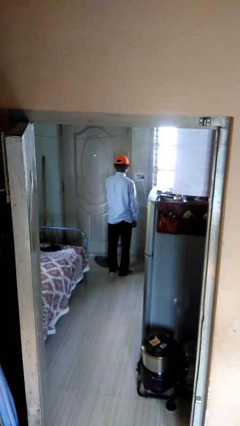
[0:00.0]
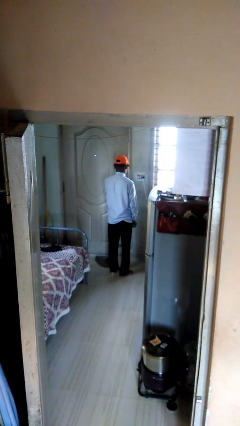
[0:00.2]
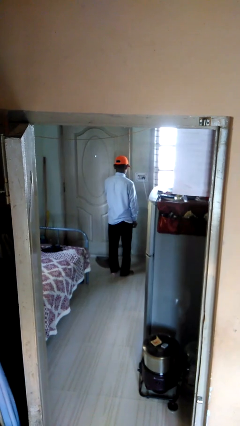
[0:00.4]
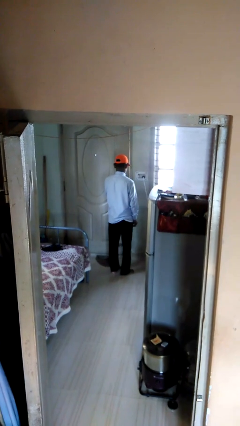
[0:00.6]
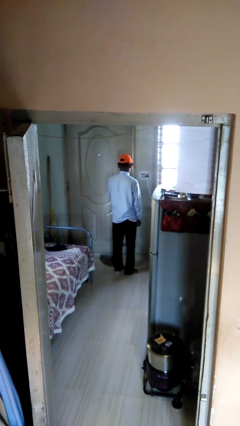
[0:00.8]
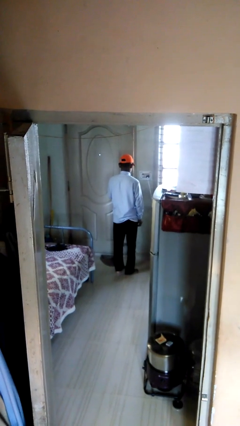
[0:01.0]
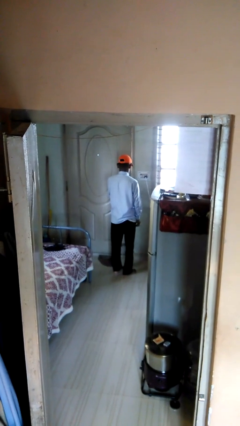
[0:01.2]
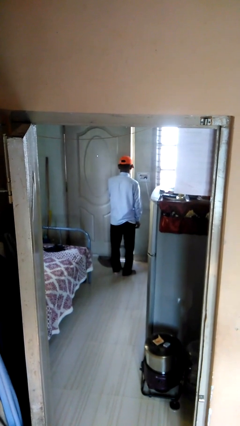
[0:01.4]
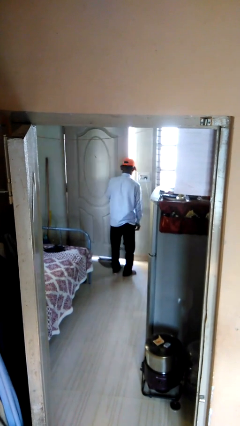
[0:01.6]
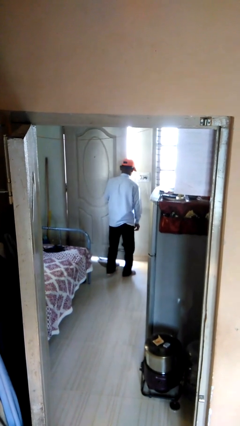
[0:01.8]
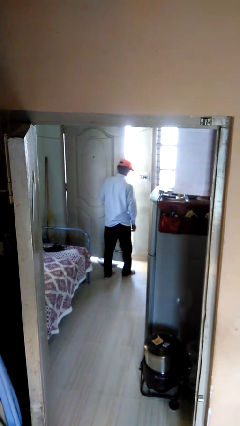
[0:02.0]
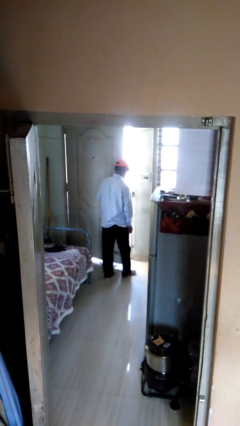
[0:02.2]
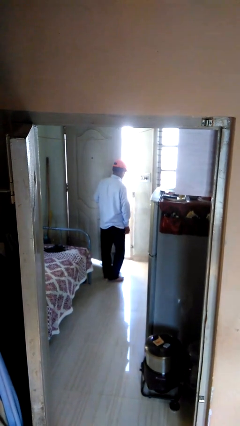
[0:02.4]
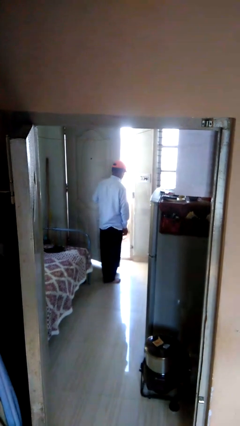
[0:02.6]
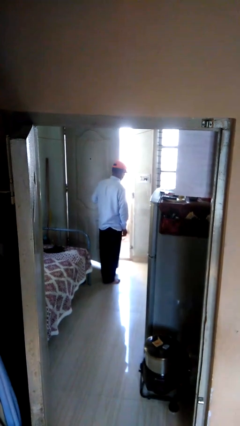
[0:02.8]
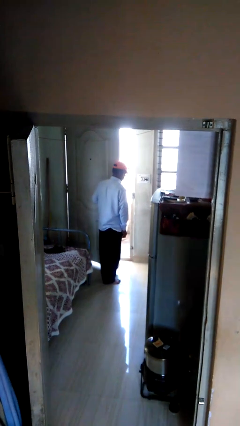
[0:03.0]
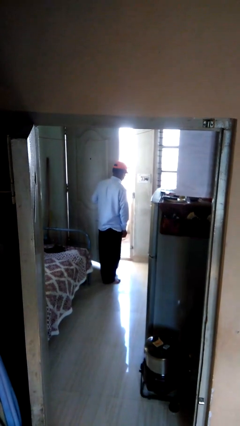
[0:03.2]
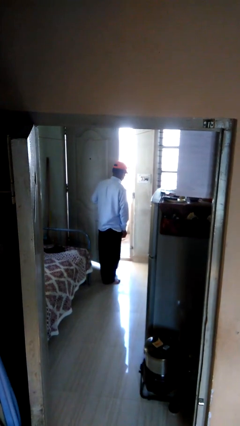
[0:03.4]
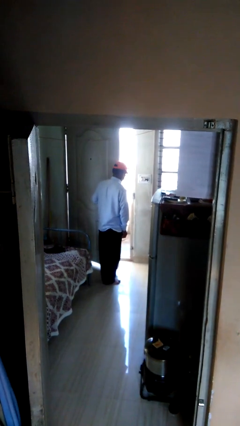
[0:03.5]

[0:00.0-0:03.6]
person opens facility door

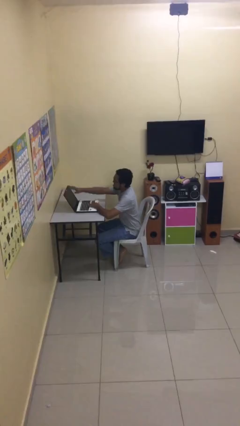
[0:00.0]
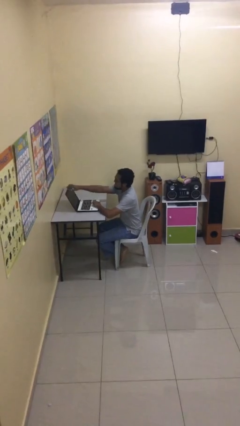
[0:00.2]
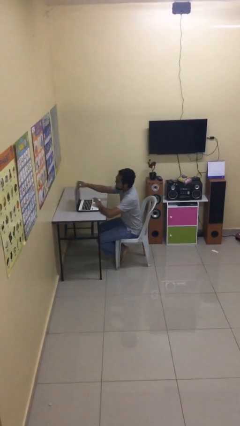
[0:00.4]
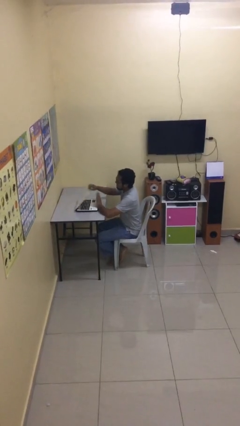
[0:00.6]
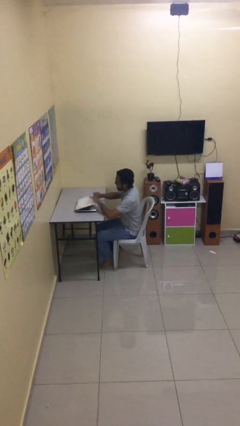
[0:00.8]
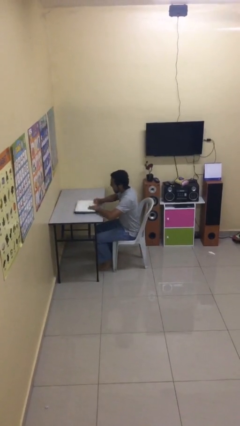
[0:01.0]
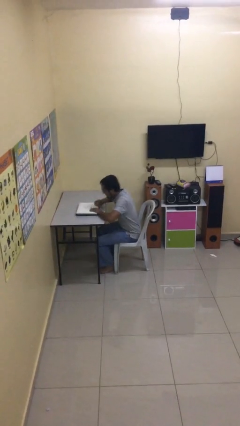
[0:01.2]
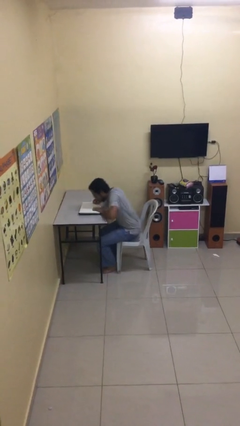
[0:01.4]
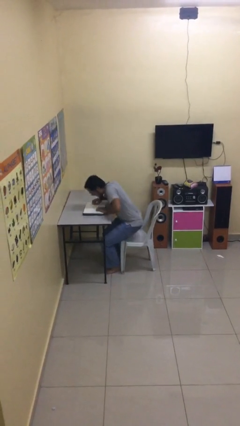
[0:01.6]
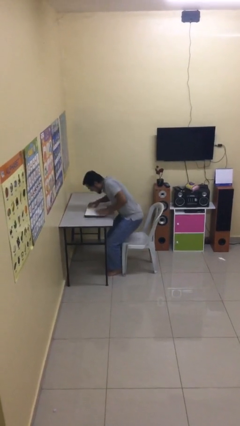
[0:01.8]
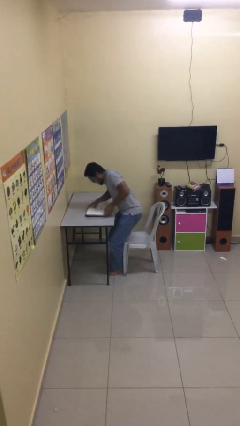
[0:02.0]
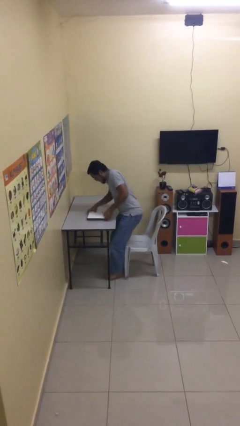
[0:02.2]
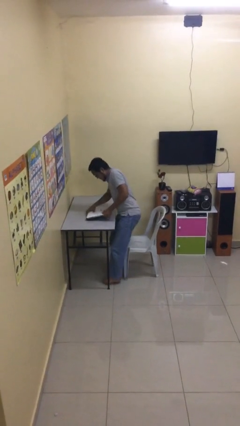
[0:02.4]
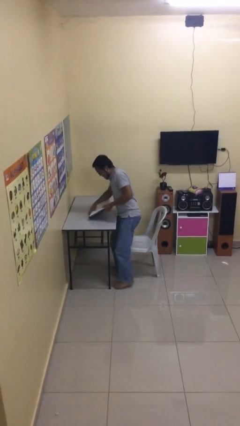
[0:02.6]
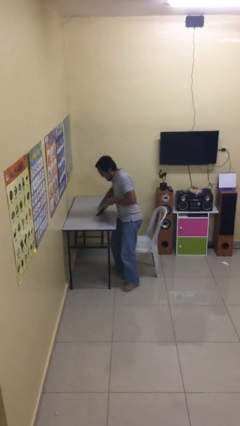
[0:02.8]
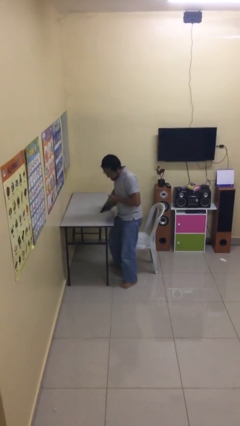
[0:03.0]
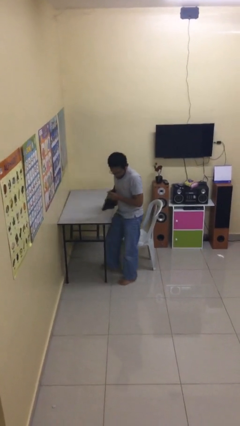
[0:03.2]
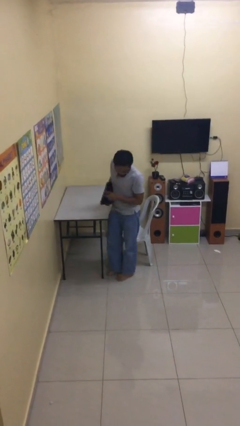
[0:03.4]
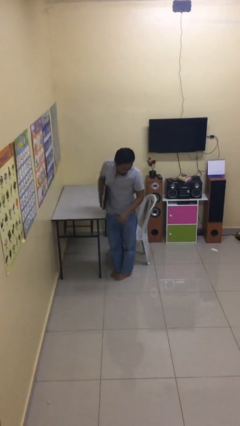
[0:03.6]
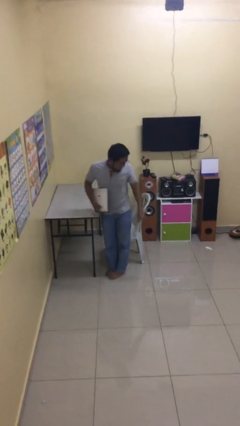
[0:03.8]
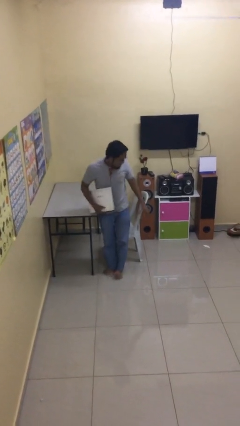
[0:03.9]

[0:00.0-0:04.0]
person stands up

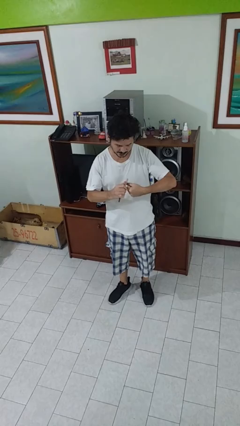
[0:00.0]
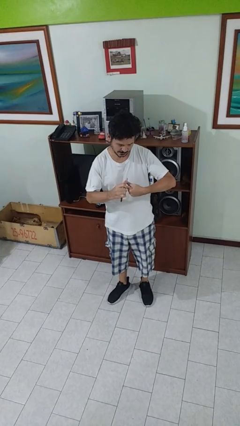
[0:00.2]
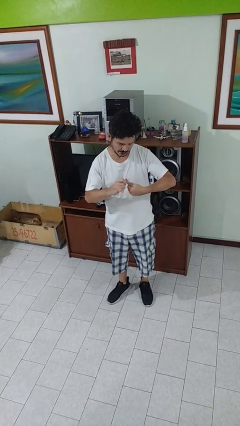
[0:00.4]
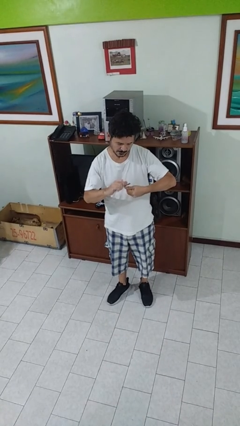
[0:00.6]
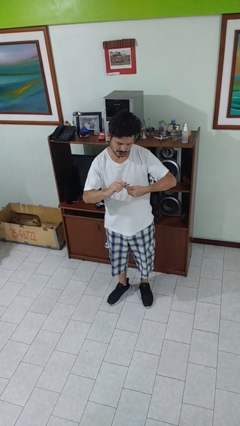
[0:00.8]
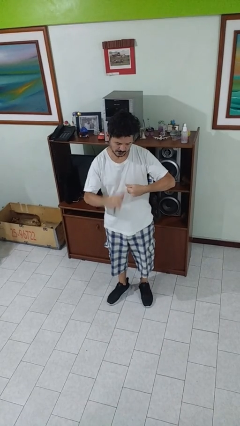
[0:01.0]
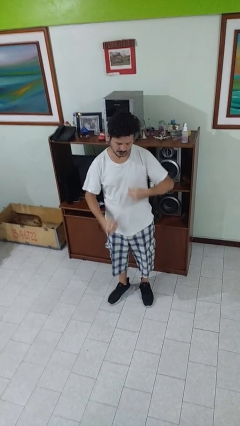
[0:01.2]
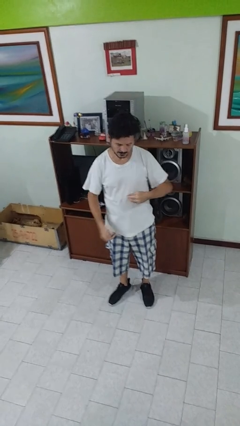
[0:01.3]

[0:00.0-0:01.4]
person files fingernails

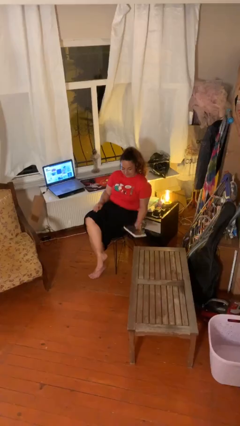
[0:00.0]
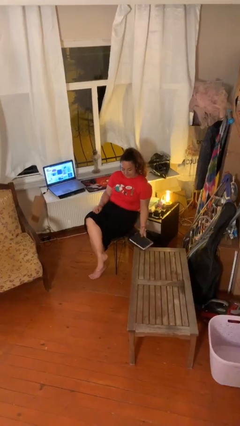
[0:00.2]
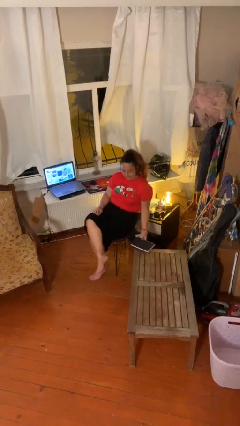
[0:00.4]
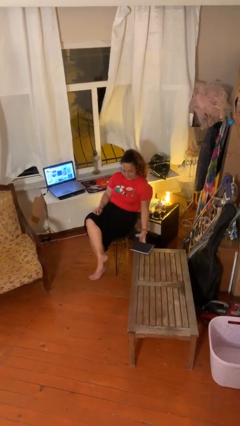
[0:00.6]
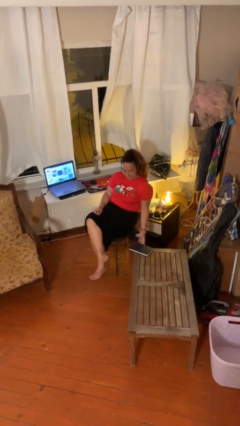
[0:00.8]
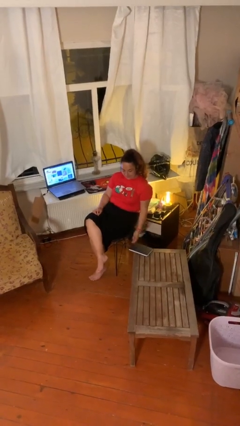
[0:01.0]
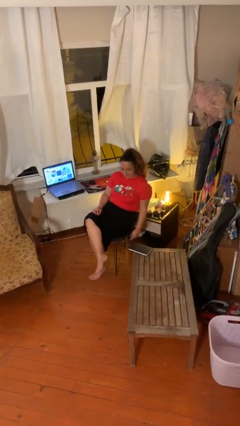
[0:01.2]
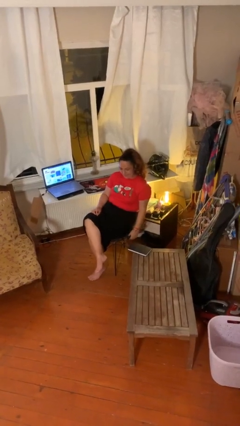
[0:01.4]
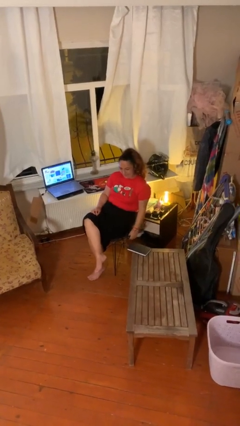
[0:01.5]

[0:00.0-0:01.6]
person puts down object on table

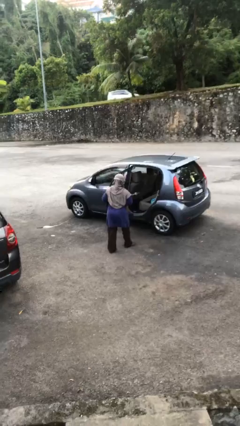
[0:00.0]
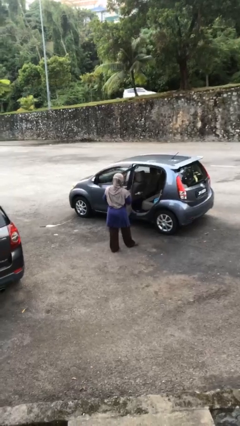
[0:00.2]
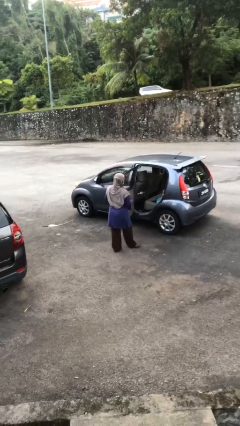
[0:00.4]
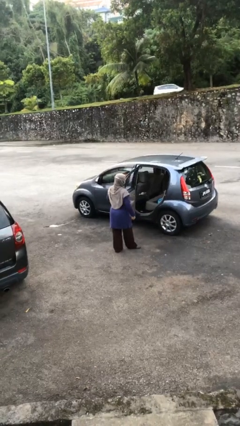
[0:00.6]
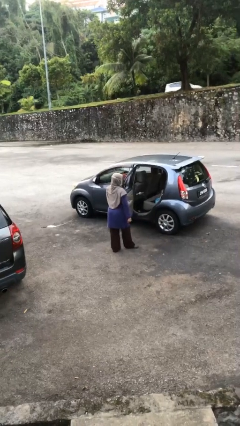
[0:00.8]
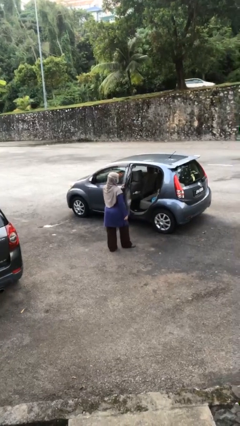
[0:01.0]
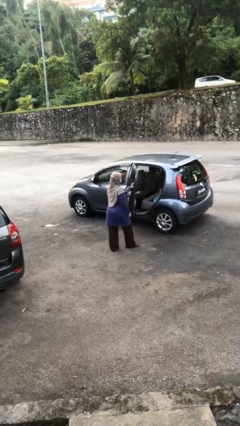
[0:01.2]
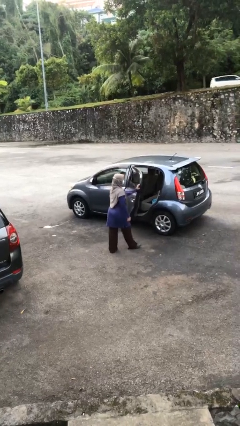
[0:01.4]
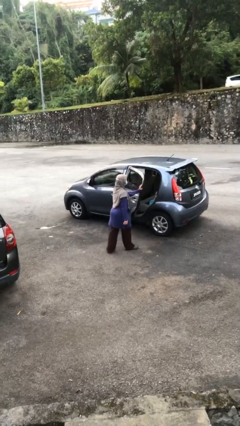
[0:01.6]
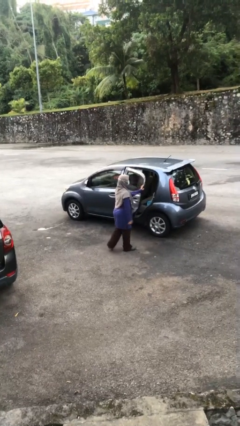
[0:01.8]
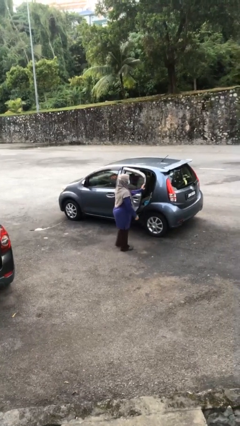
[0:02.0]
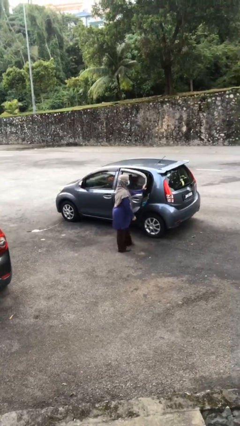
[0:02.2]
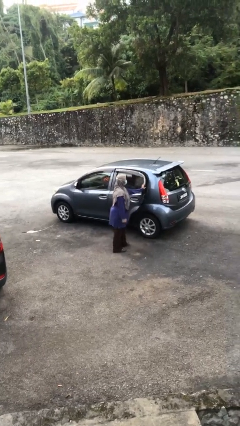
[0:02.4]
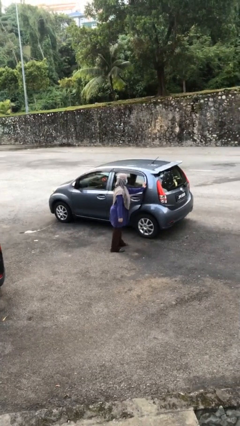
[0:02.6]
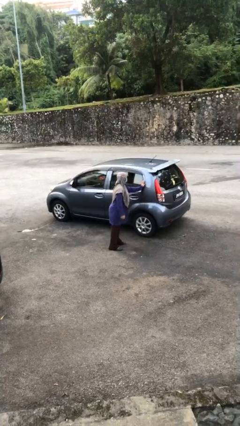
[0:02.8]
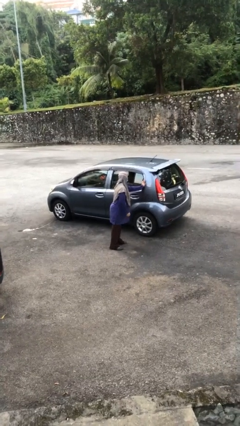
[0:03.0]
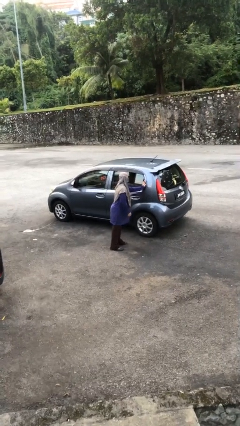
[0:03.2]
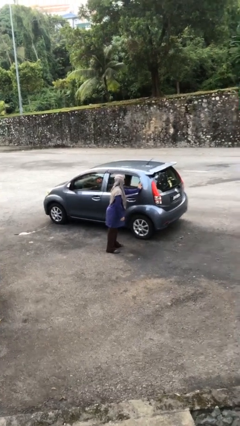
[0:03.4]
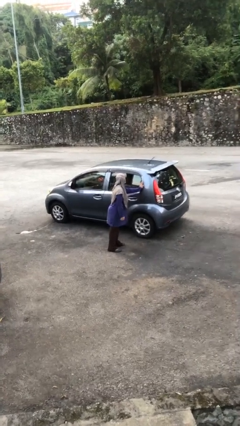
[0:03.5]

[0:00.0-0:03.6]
person closes car door

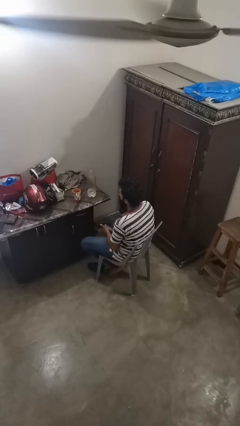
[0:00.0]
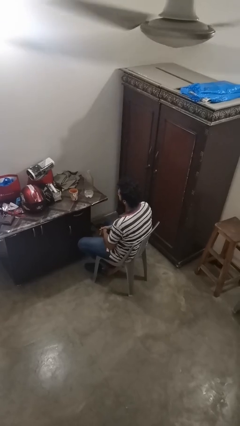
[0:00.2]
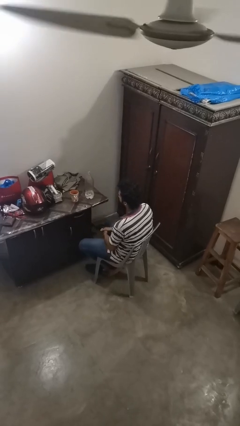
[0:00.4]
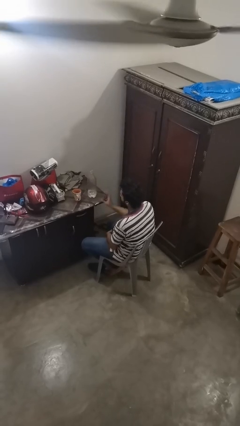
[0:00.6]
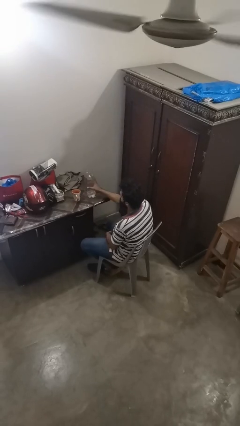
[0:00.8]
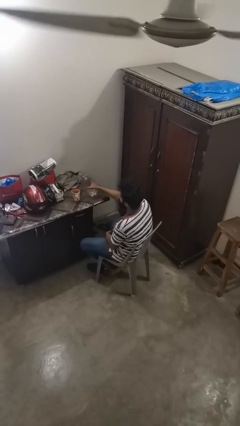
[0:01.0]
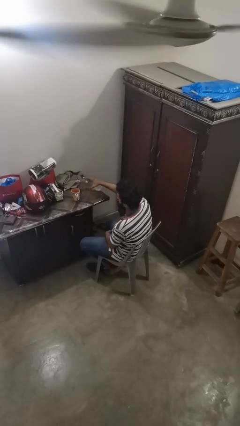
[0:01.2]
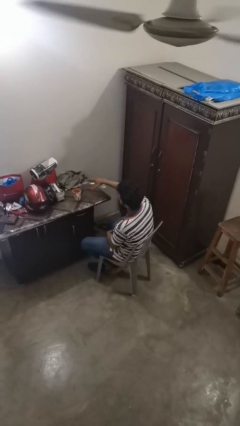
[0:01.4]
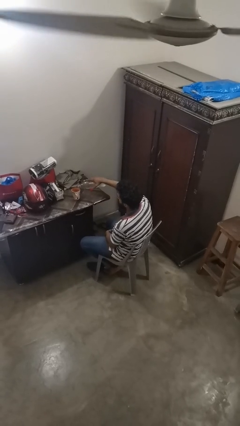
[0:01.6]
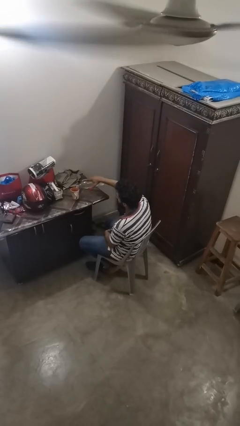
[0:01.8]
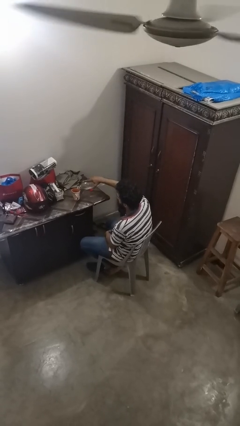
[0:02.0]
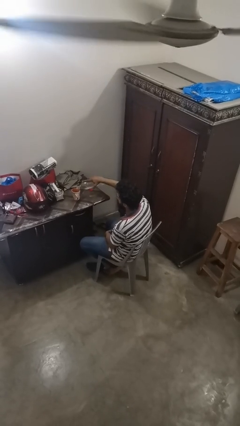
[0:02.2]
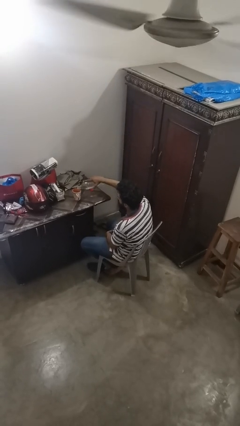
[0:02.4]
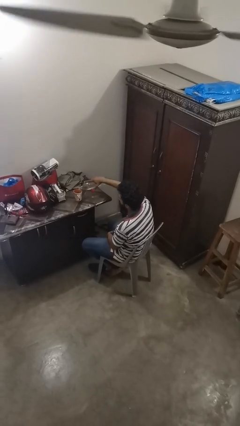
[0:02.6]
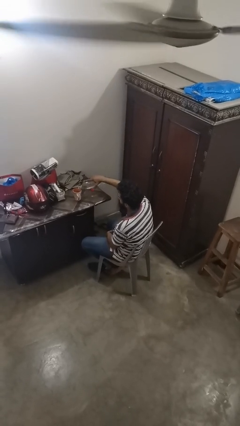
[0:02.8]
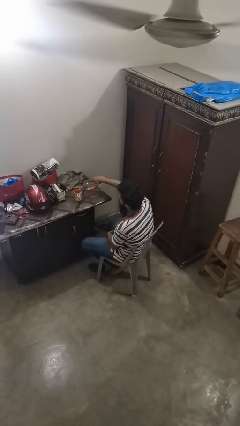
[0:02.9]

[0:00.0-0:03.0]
person pours liquid into cup
